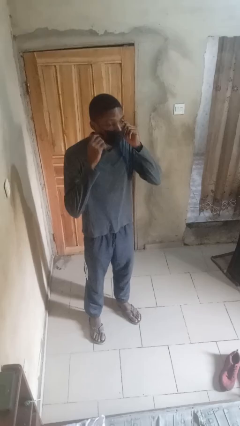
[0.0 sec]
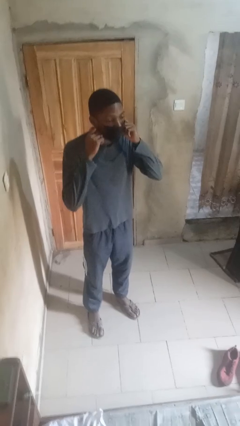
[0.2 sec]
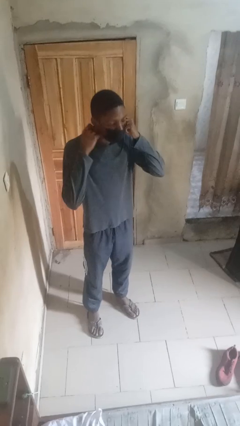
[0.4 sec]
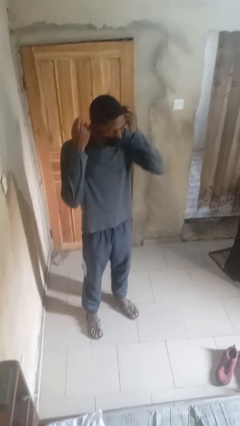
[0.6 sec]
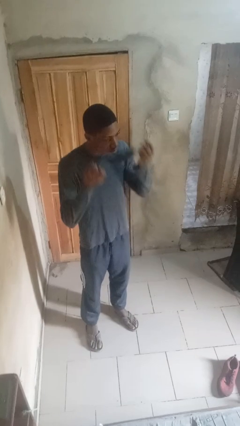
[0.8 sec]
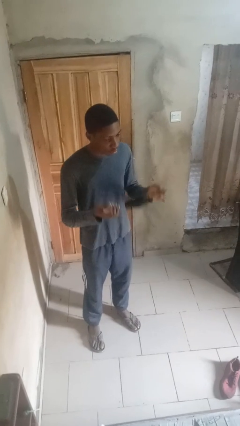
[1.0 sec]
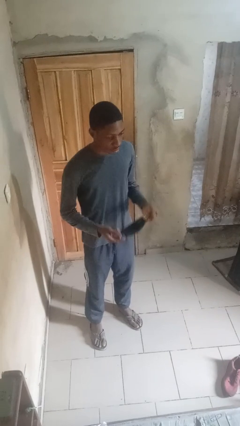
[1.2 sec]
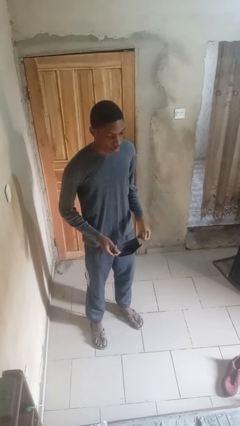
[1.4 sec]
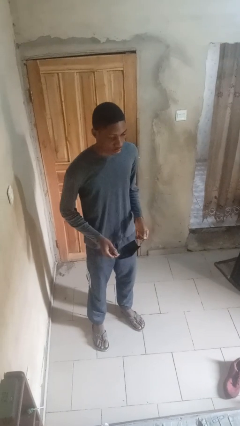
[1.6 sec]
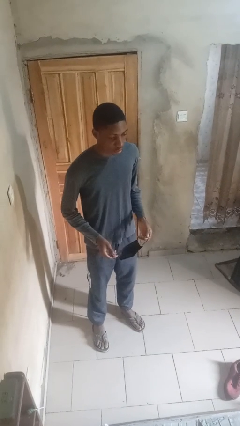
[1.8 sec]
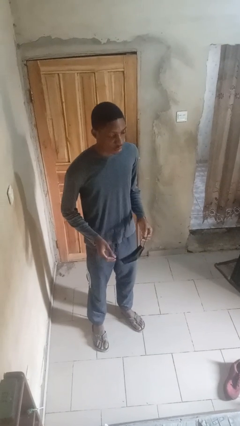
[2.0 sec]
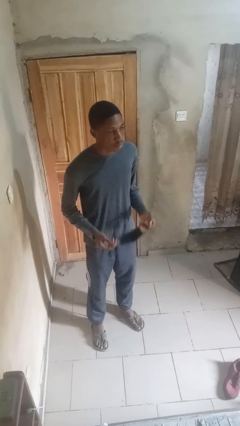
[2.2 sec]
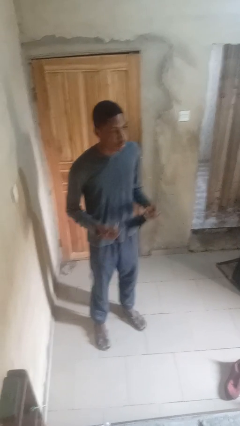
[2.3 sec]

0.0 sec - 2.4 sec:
person takes off facemask

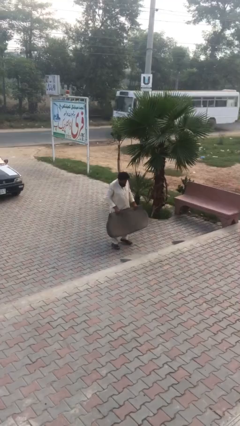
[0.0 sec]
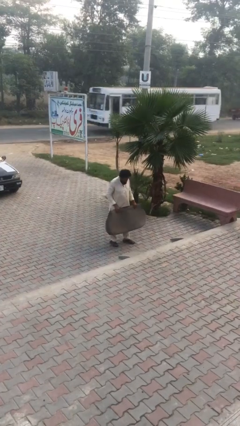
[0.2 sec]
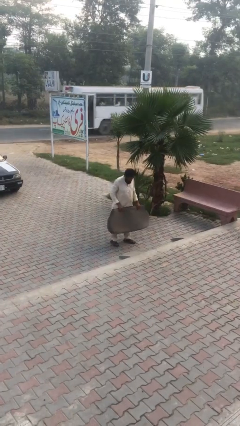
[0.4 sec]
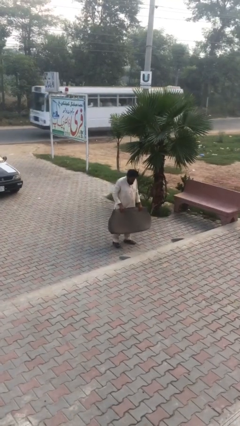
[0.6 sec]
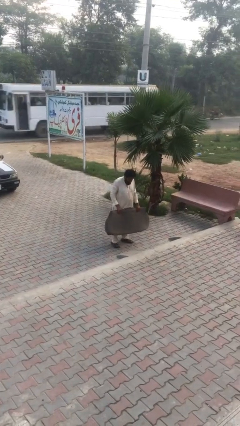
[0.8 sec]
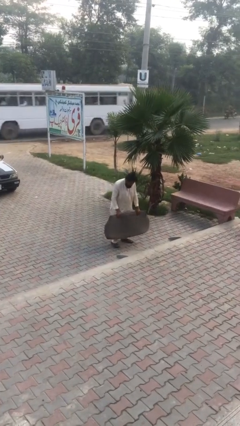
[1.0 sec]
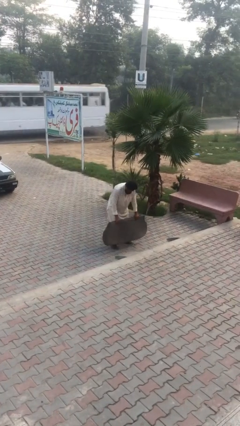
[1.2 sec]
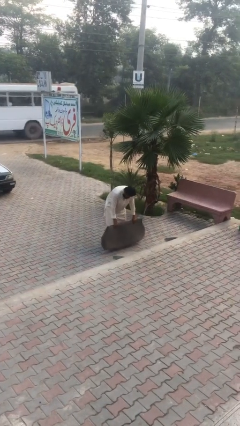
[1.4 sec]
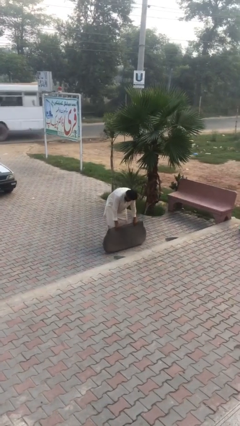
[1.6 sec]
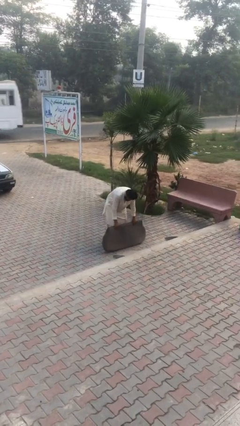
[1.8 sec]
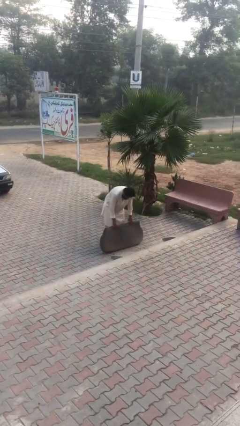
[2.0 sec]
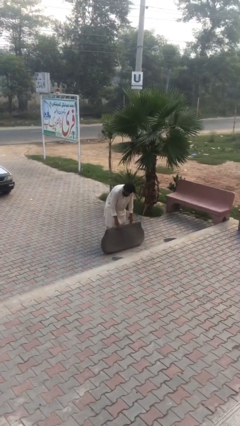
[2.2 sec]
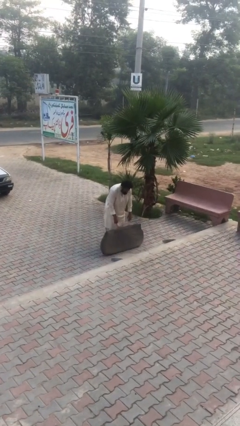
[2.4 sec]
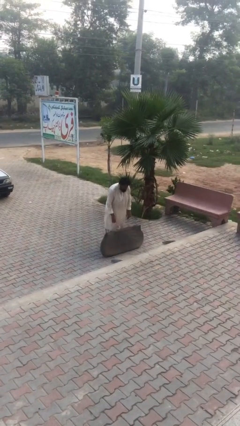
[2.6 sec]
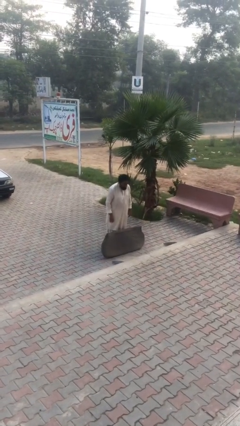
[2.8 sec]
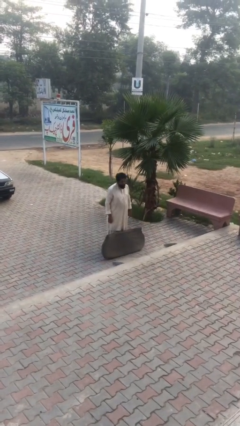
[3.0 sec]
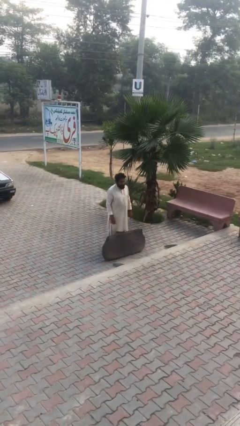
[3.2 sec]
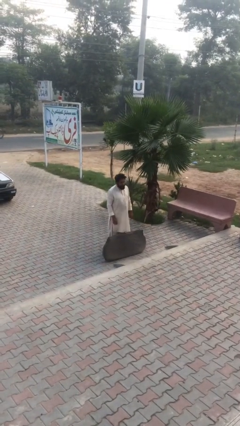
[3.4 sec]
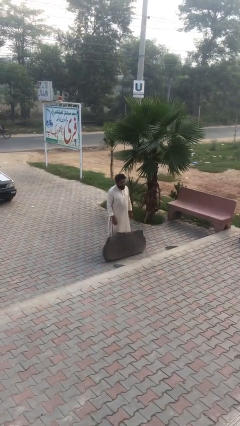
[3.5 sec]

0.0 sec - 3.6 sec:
person puts down object on floor

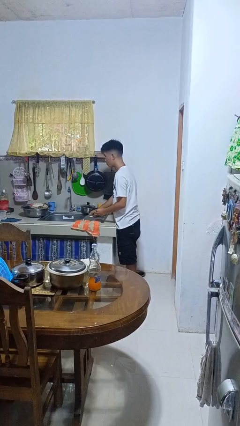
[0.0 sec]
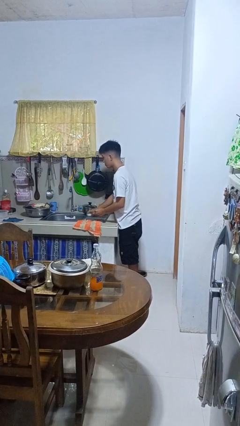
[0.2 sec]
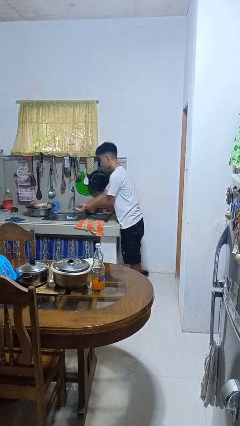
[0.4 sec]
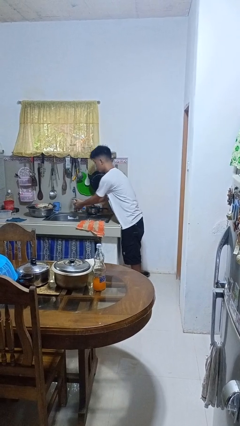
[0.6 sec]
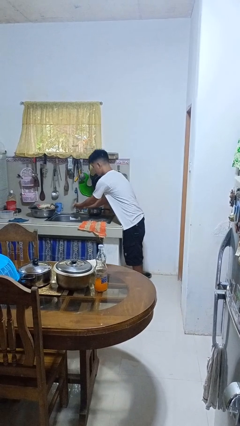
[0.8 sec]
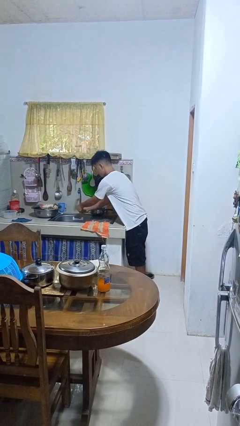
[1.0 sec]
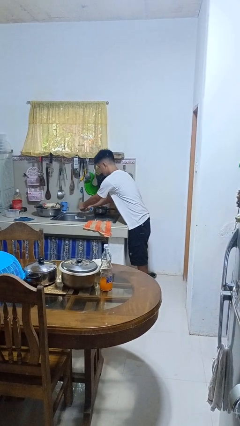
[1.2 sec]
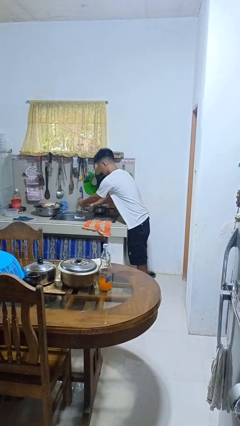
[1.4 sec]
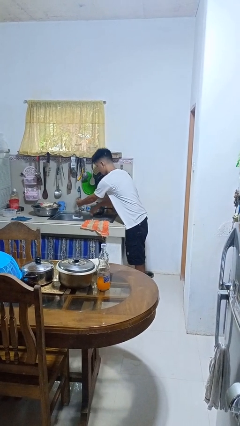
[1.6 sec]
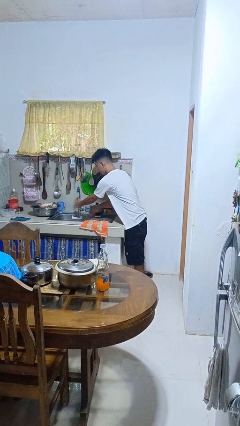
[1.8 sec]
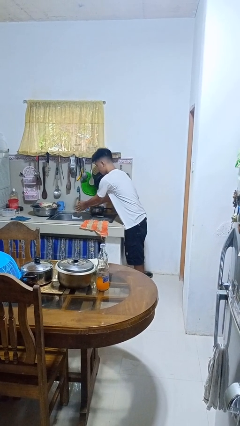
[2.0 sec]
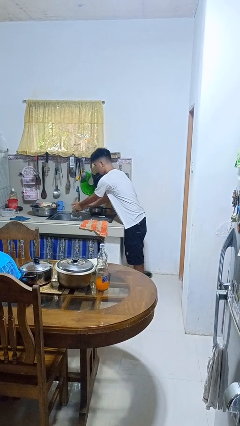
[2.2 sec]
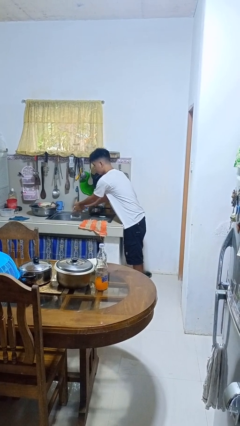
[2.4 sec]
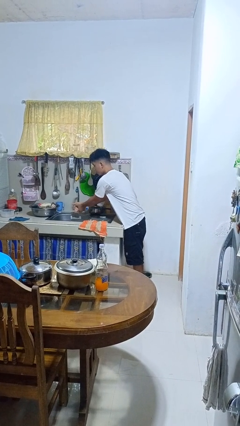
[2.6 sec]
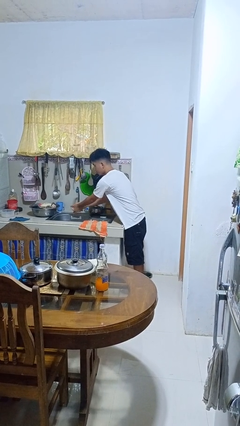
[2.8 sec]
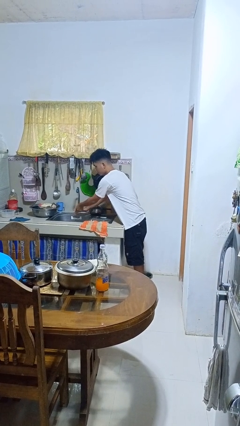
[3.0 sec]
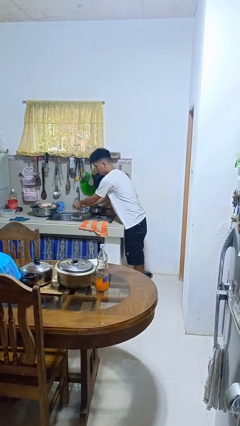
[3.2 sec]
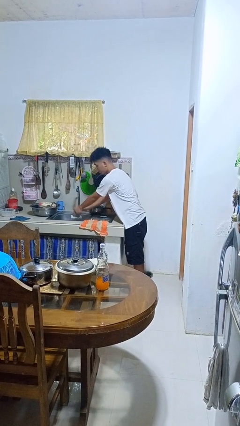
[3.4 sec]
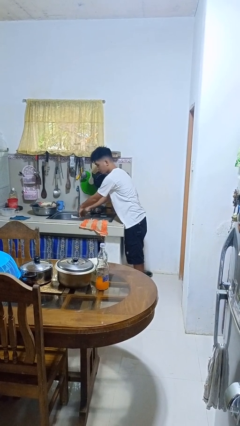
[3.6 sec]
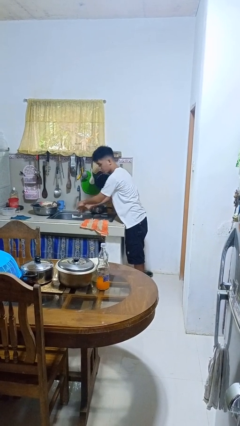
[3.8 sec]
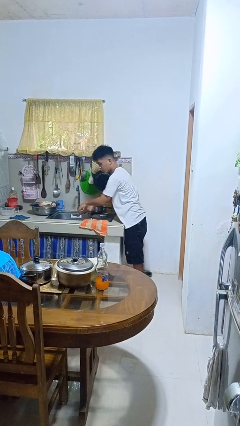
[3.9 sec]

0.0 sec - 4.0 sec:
person washes hands

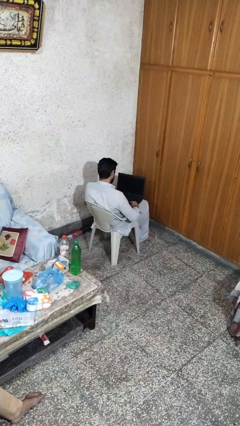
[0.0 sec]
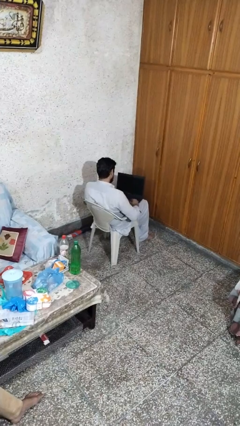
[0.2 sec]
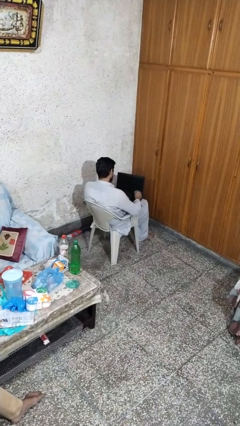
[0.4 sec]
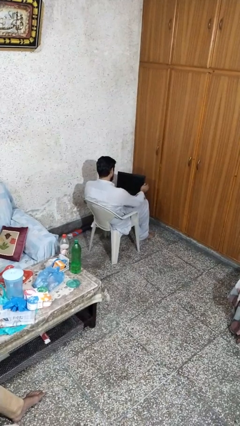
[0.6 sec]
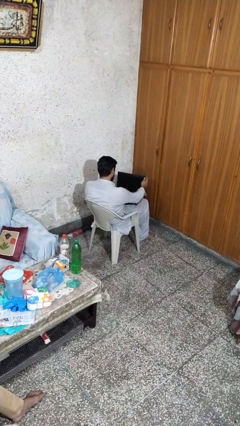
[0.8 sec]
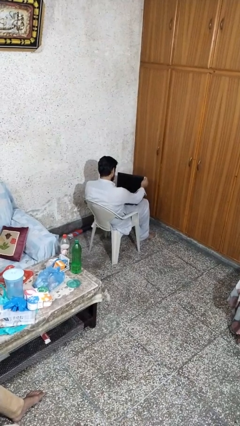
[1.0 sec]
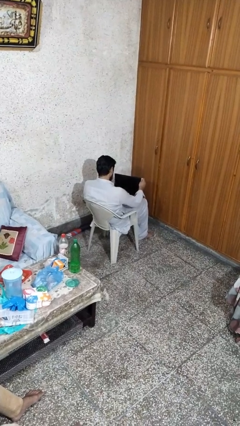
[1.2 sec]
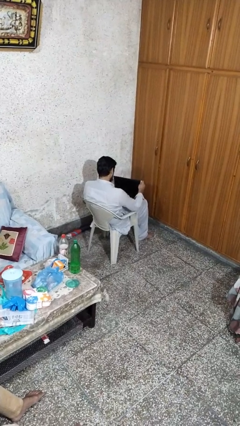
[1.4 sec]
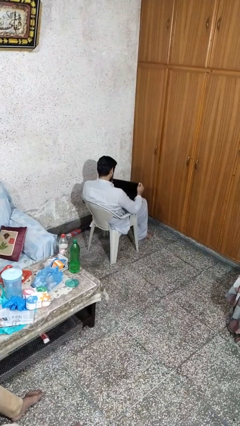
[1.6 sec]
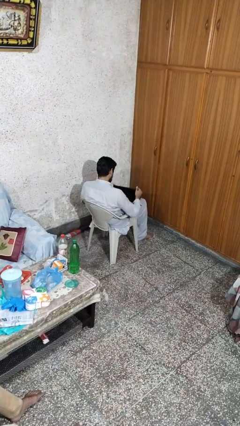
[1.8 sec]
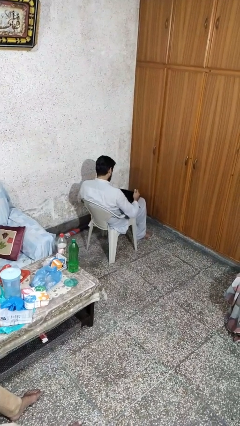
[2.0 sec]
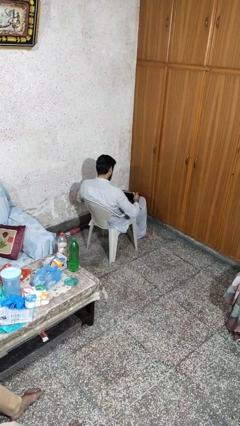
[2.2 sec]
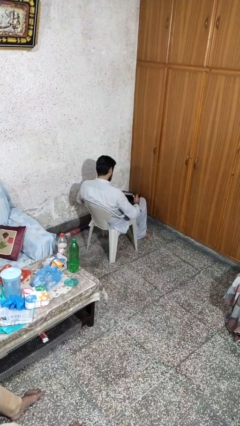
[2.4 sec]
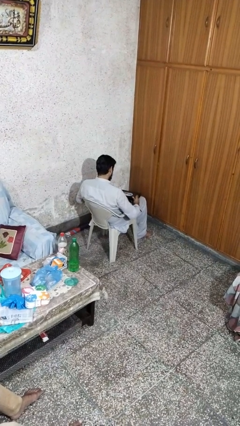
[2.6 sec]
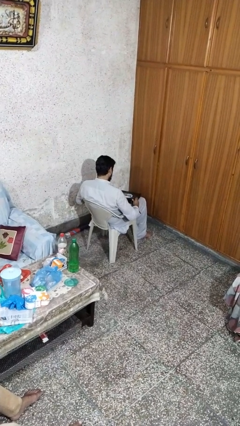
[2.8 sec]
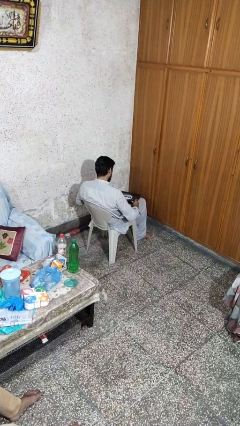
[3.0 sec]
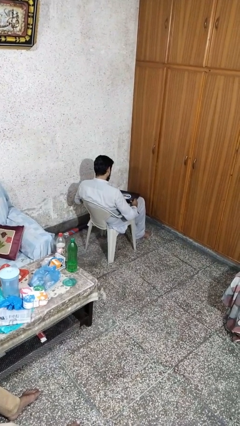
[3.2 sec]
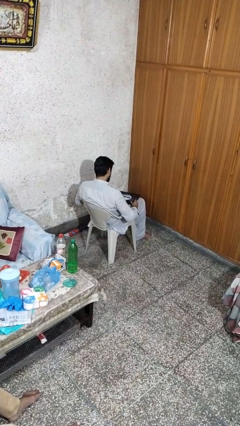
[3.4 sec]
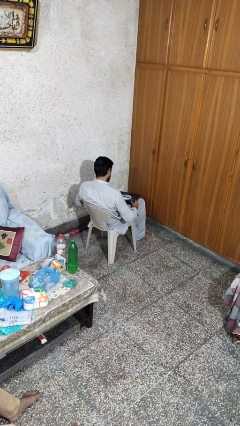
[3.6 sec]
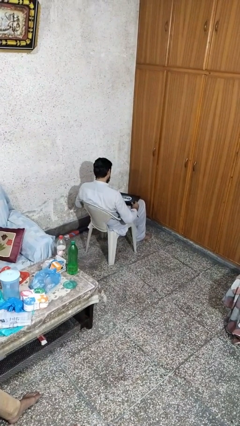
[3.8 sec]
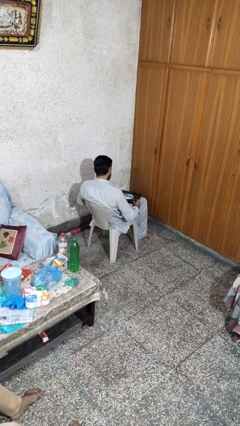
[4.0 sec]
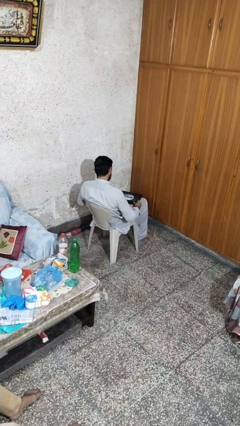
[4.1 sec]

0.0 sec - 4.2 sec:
person closes laptop

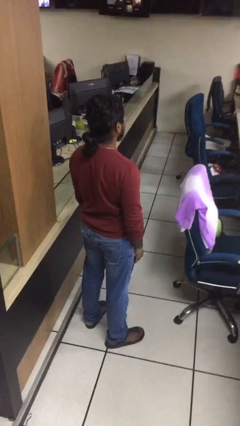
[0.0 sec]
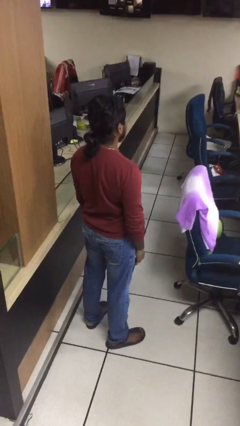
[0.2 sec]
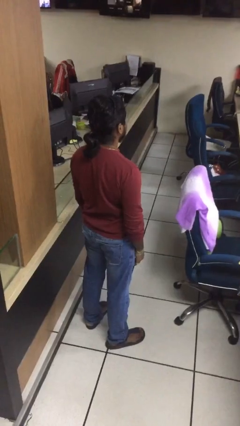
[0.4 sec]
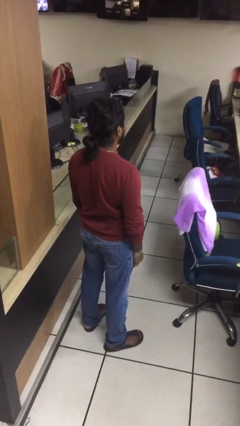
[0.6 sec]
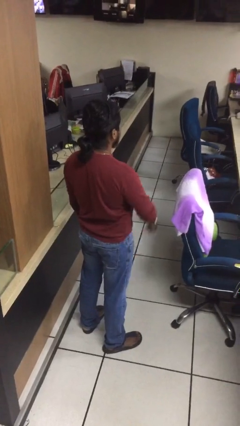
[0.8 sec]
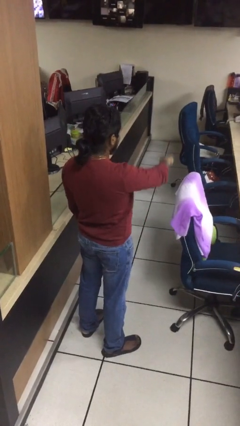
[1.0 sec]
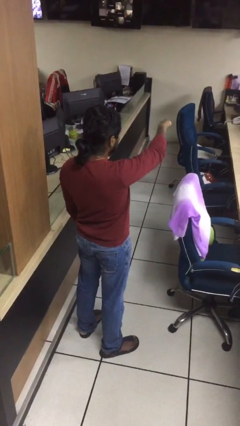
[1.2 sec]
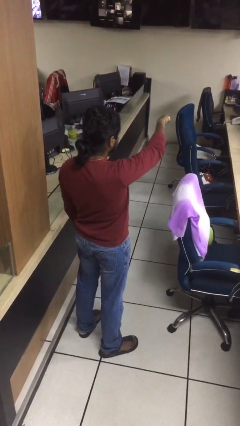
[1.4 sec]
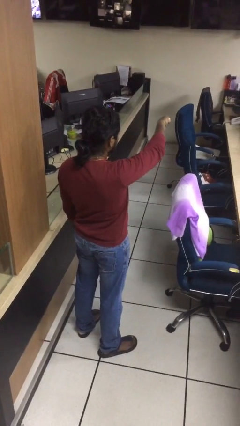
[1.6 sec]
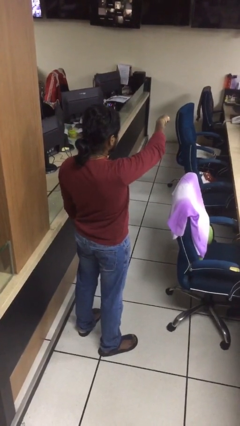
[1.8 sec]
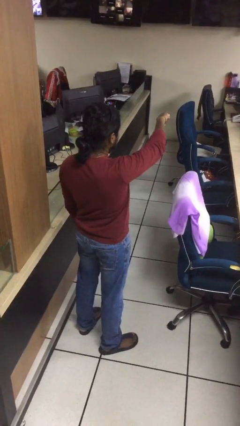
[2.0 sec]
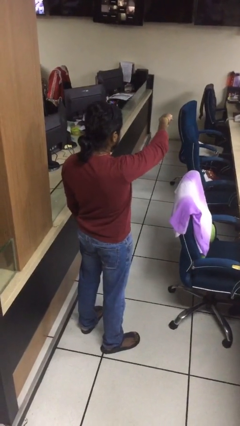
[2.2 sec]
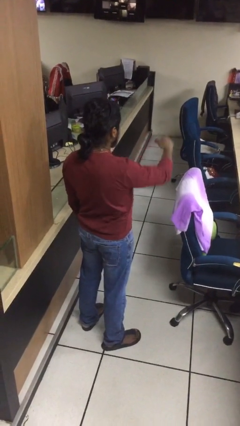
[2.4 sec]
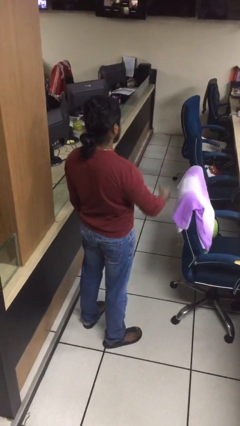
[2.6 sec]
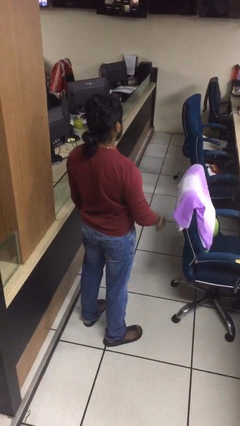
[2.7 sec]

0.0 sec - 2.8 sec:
person gestures thumbs down
